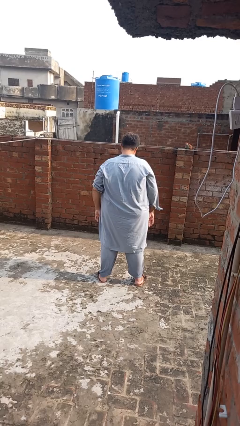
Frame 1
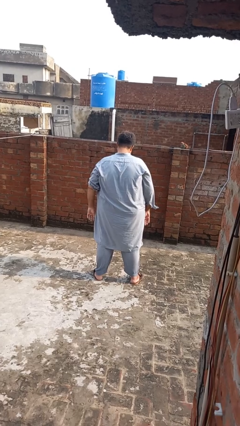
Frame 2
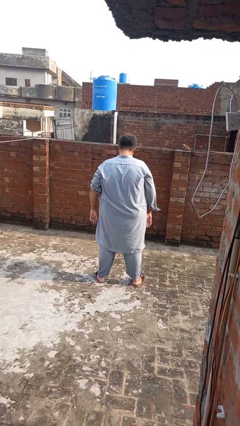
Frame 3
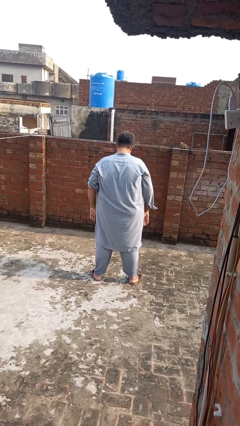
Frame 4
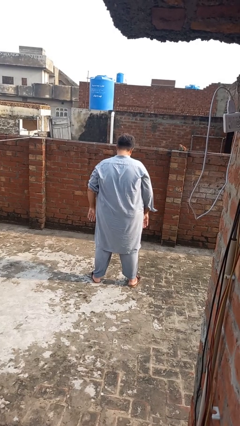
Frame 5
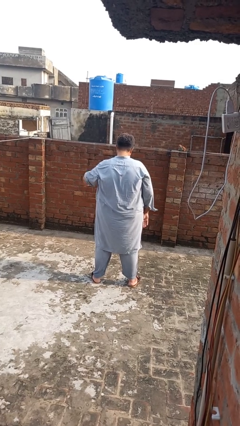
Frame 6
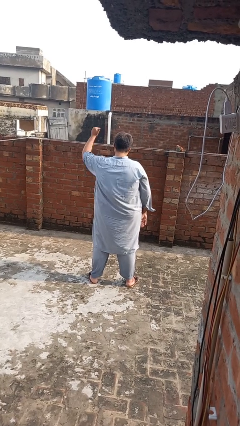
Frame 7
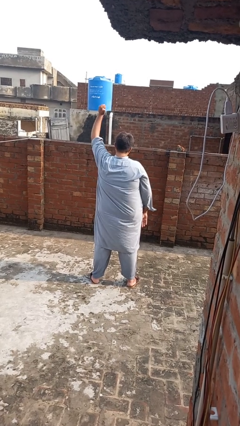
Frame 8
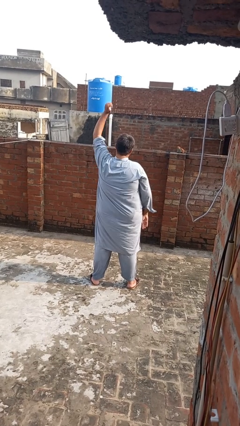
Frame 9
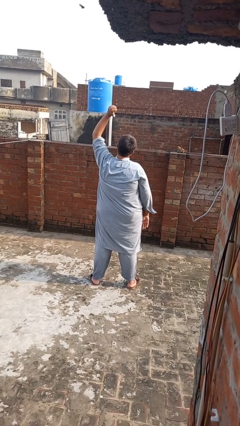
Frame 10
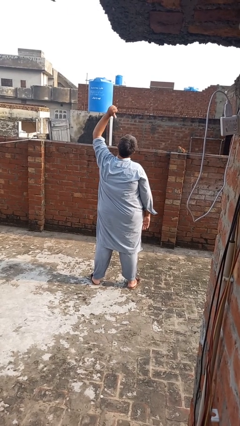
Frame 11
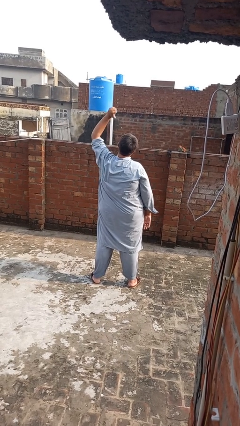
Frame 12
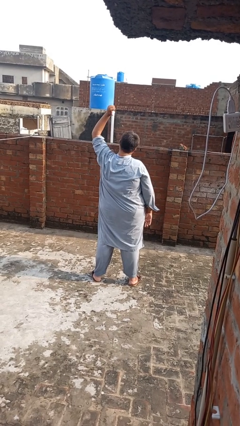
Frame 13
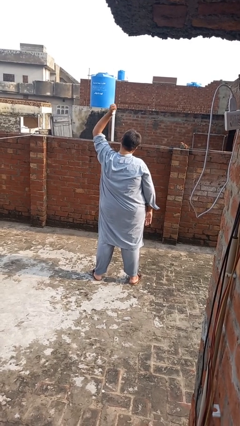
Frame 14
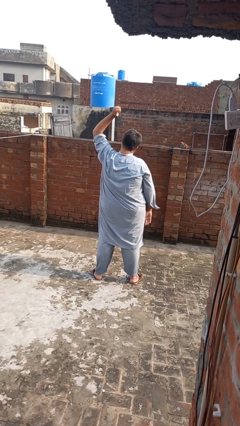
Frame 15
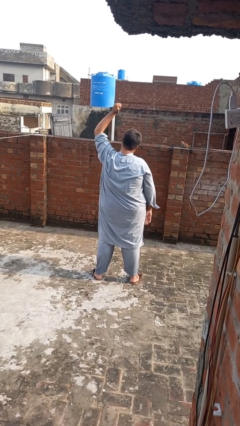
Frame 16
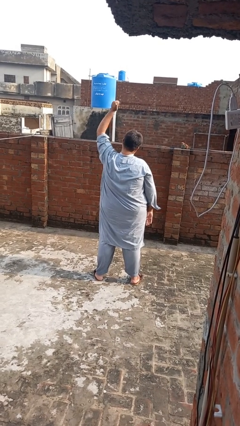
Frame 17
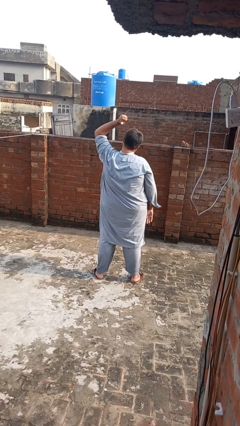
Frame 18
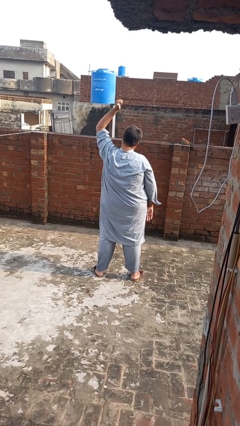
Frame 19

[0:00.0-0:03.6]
person gestures behind me

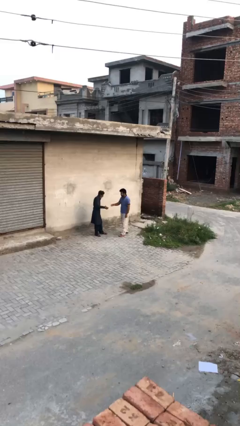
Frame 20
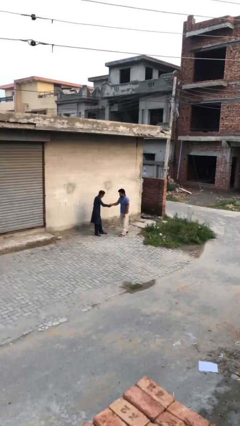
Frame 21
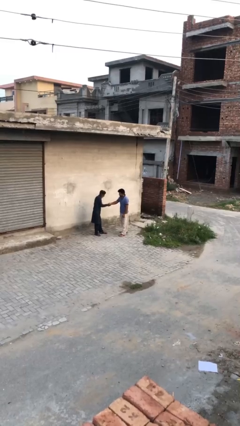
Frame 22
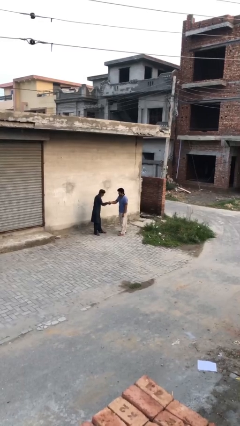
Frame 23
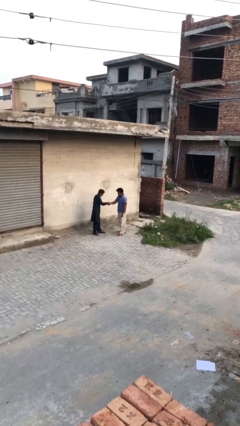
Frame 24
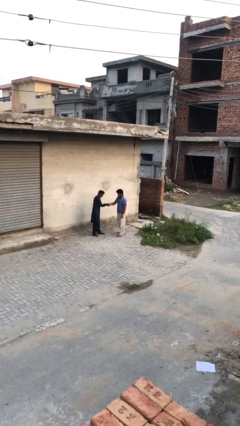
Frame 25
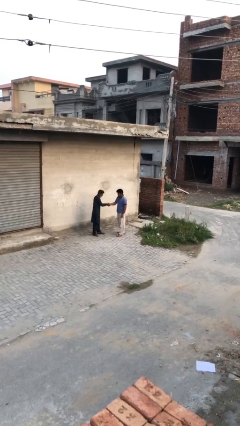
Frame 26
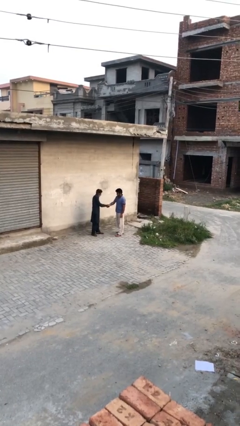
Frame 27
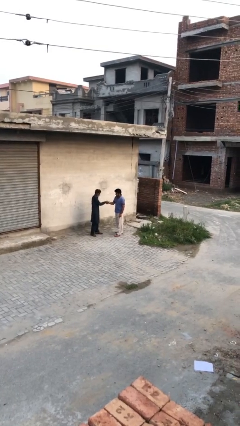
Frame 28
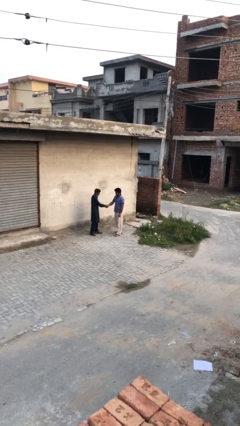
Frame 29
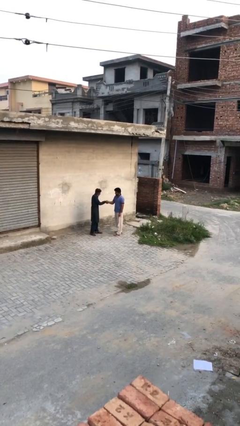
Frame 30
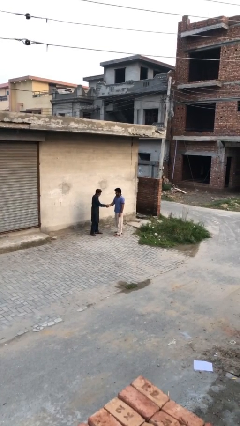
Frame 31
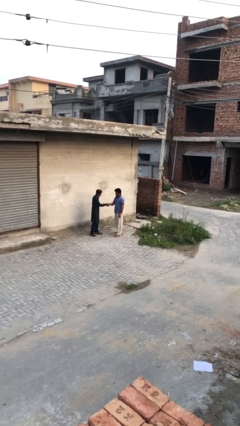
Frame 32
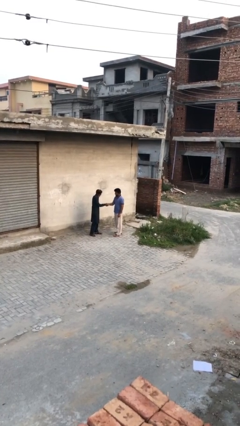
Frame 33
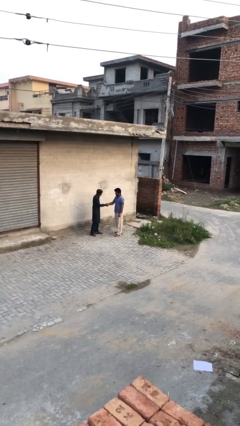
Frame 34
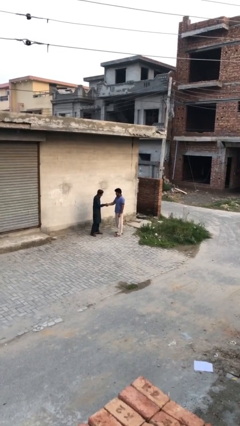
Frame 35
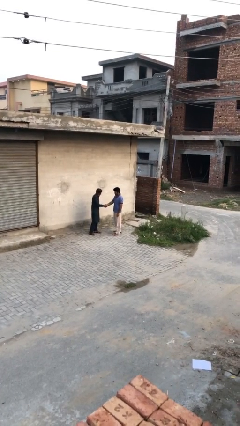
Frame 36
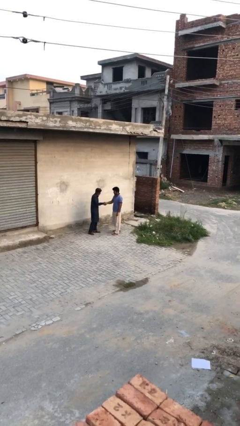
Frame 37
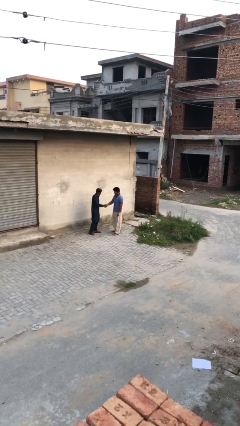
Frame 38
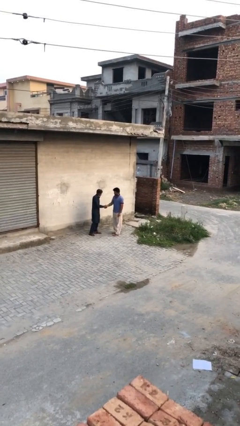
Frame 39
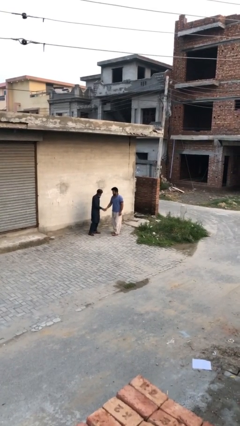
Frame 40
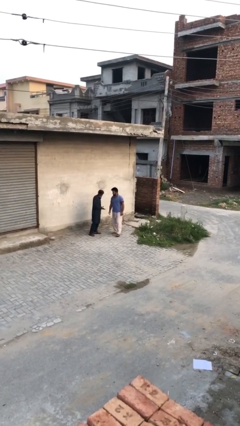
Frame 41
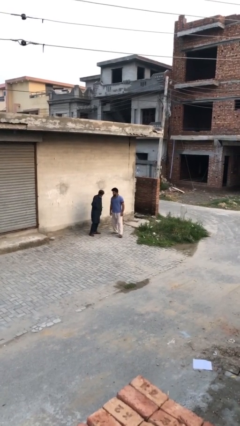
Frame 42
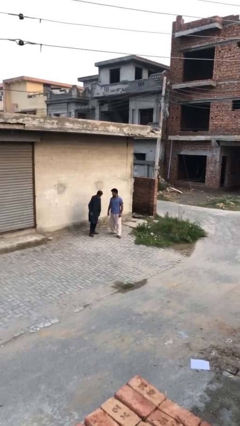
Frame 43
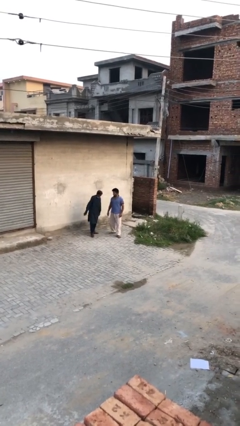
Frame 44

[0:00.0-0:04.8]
person shakes hand

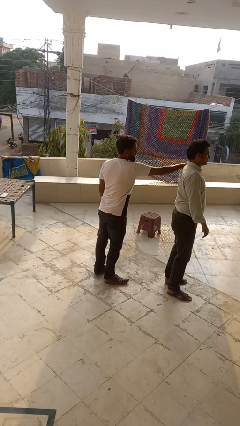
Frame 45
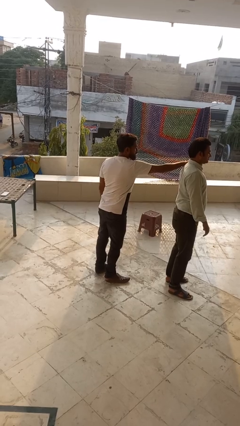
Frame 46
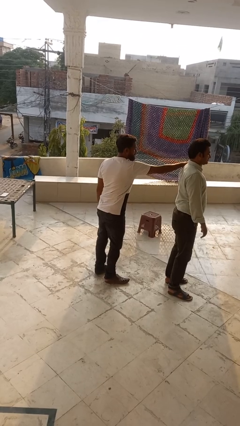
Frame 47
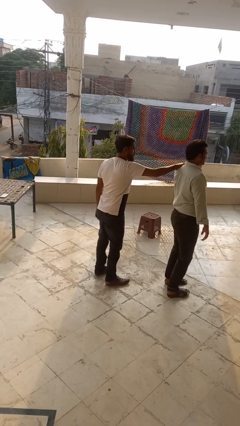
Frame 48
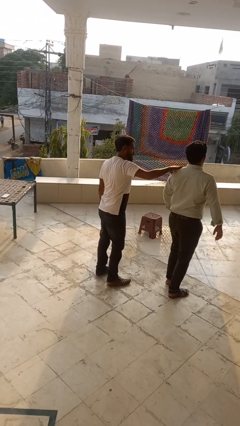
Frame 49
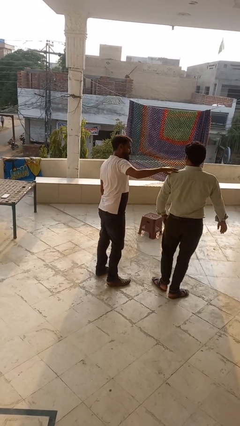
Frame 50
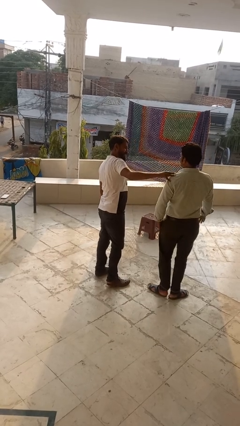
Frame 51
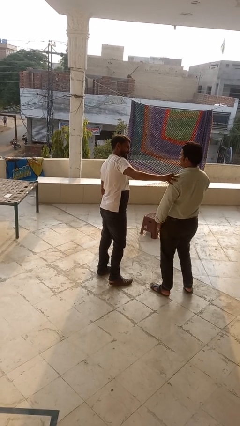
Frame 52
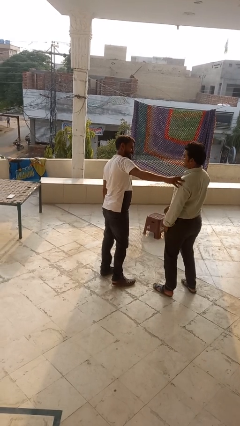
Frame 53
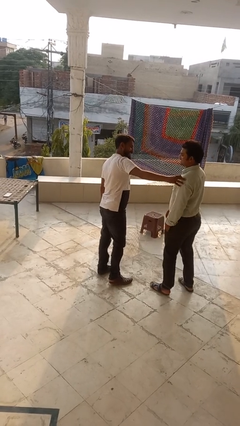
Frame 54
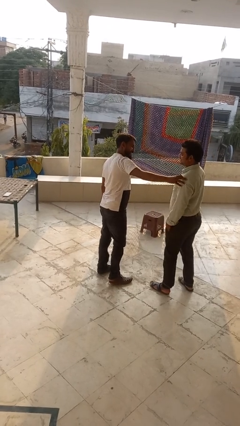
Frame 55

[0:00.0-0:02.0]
person spins person around

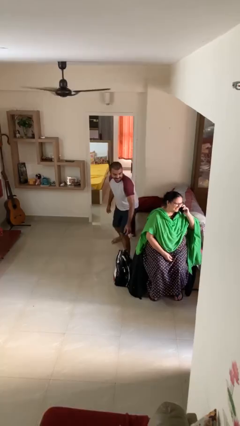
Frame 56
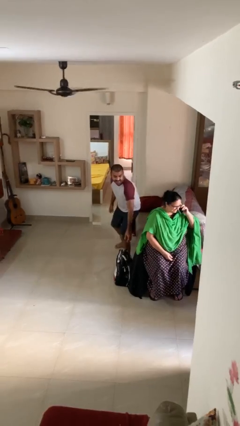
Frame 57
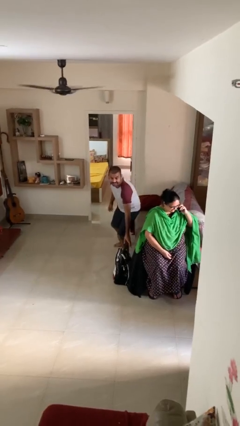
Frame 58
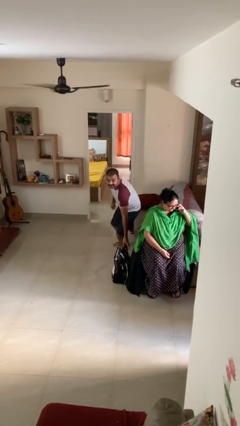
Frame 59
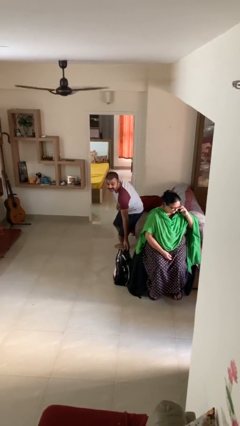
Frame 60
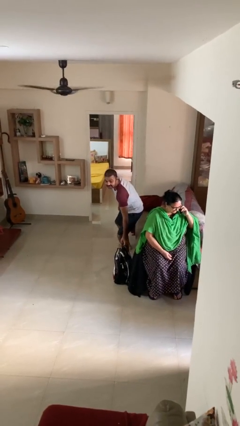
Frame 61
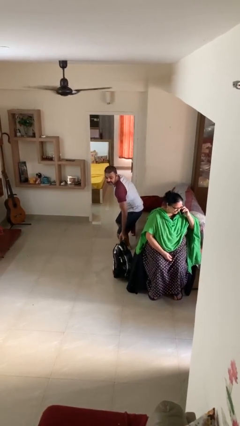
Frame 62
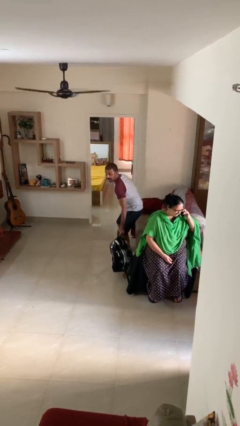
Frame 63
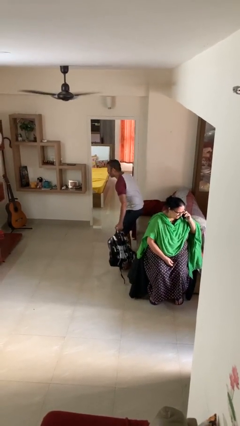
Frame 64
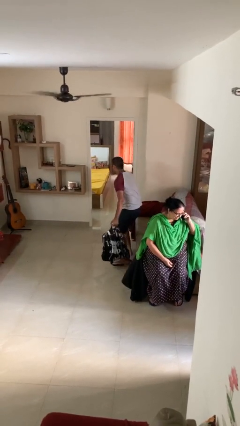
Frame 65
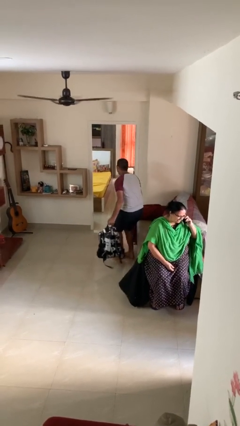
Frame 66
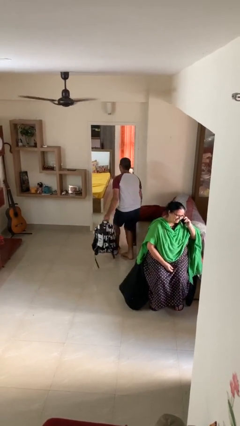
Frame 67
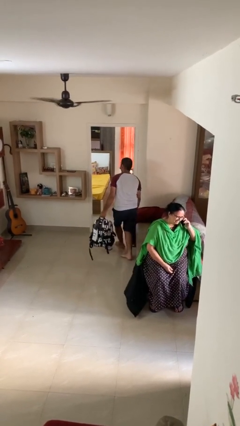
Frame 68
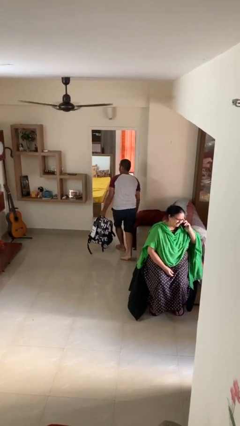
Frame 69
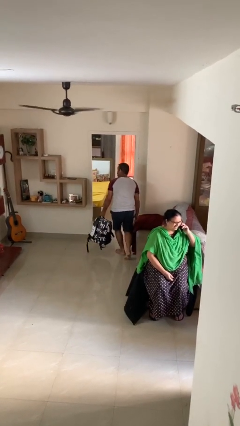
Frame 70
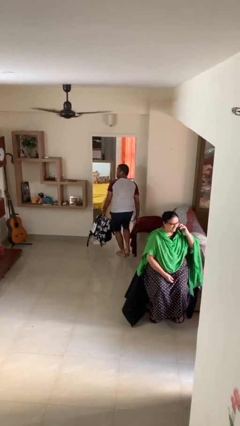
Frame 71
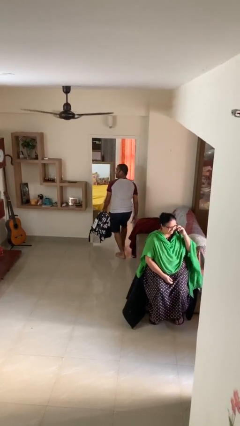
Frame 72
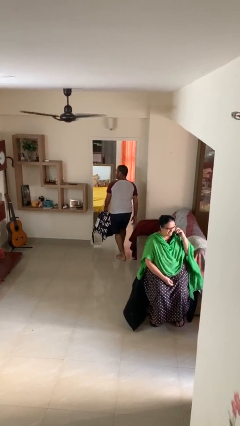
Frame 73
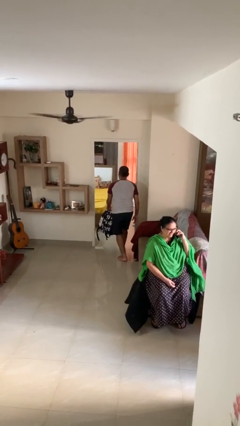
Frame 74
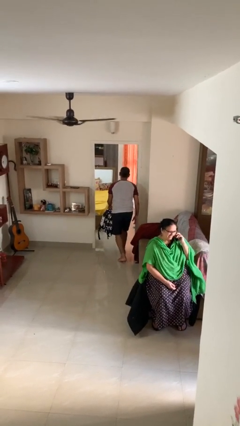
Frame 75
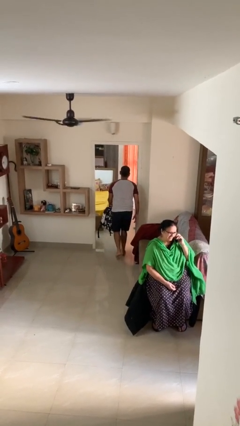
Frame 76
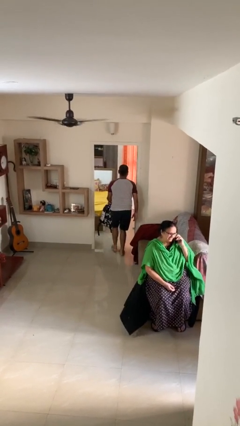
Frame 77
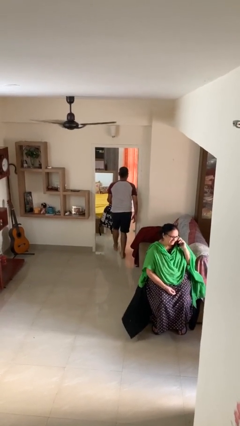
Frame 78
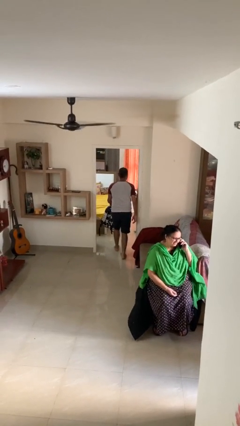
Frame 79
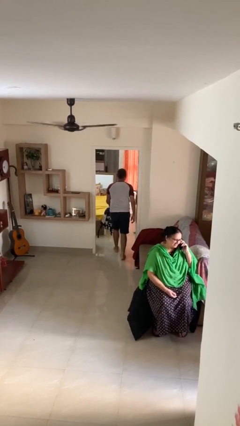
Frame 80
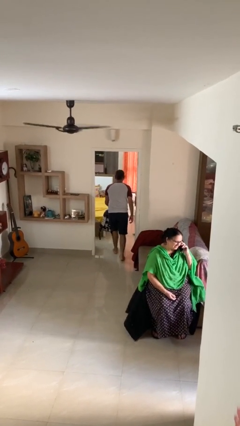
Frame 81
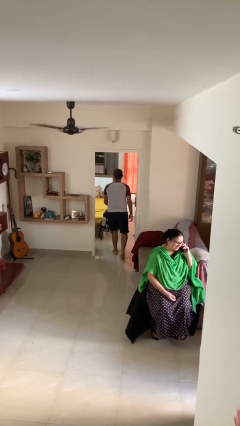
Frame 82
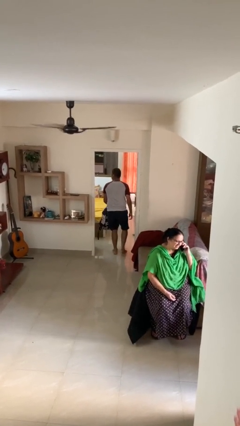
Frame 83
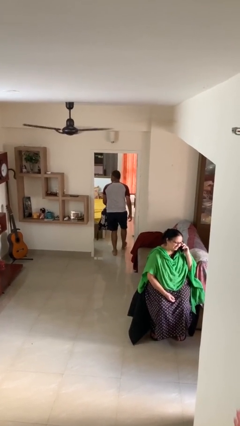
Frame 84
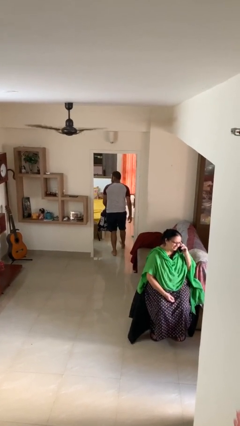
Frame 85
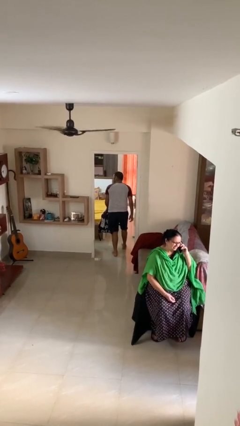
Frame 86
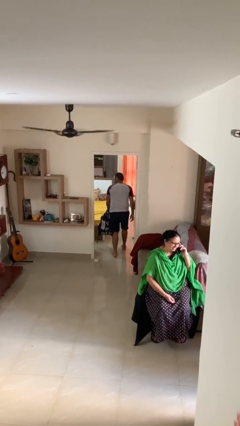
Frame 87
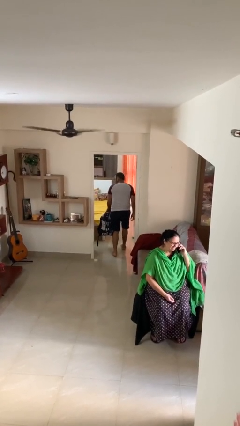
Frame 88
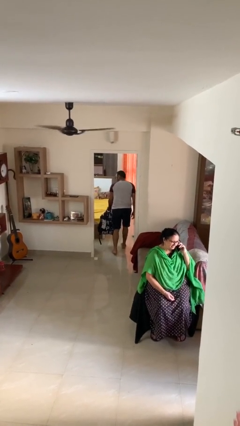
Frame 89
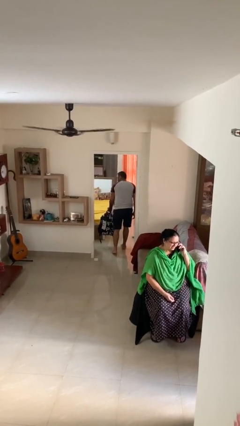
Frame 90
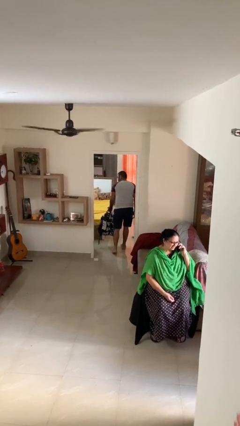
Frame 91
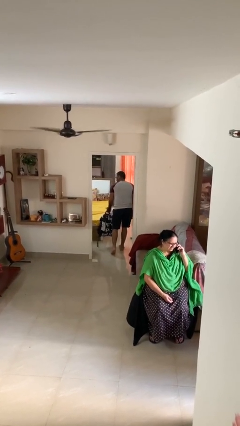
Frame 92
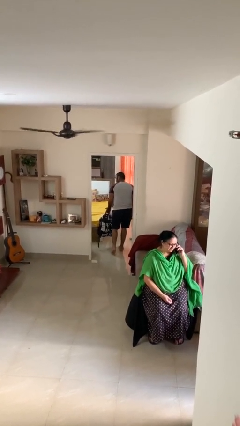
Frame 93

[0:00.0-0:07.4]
person steals object from person
